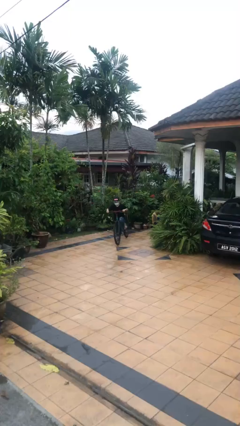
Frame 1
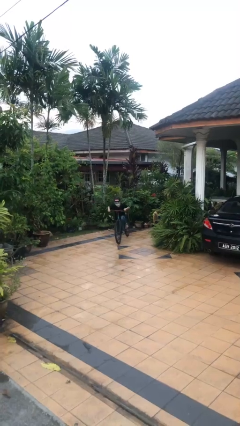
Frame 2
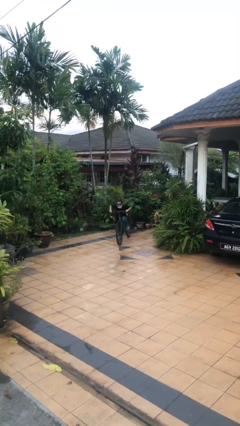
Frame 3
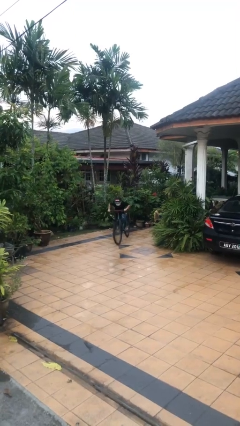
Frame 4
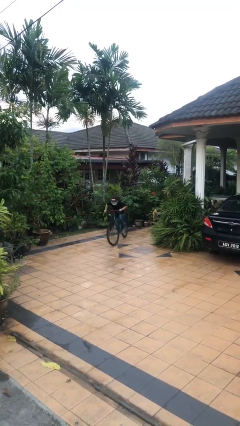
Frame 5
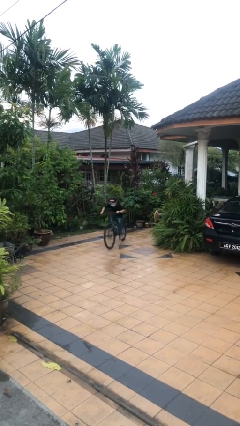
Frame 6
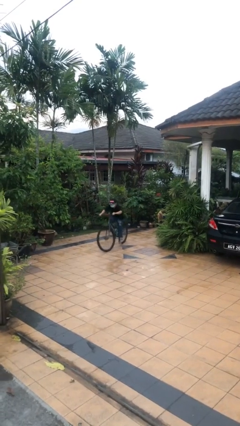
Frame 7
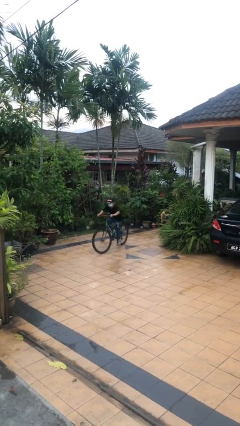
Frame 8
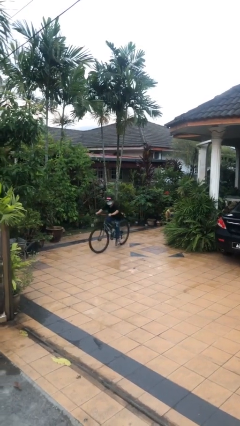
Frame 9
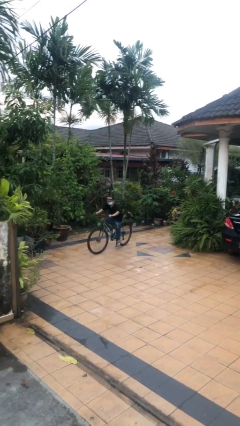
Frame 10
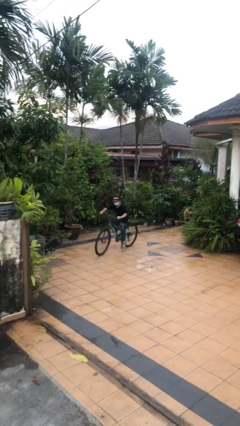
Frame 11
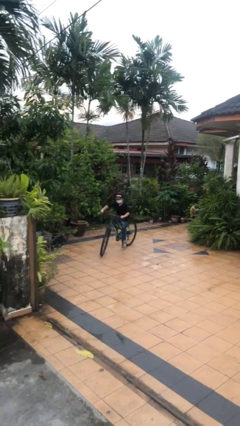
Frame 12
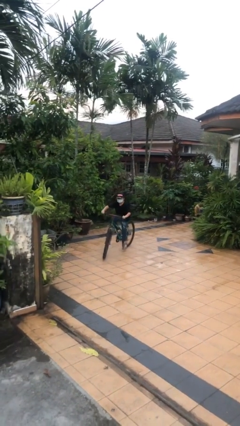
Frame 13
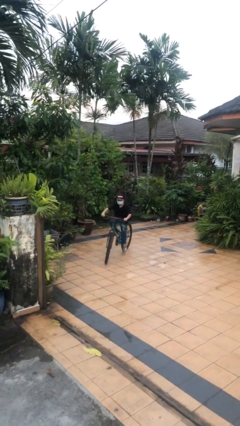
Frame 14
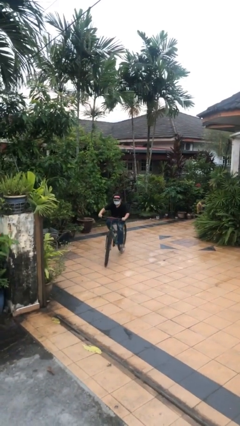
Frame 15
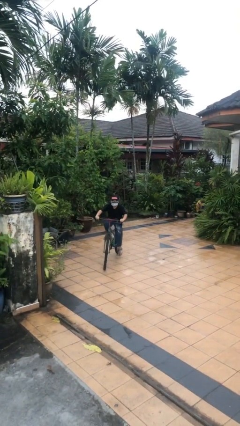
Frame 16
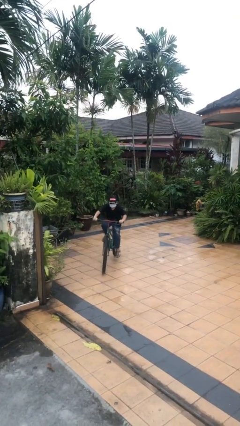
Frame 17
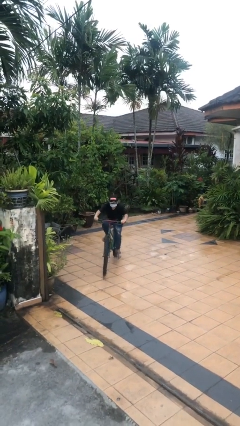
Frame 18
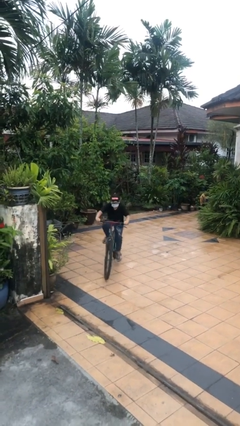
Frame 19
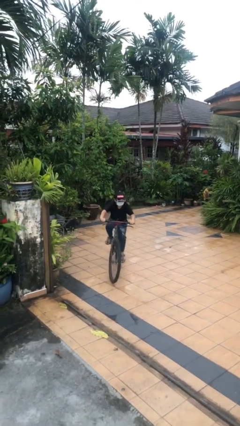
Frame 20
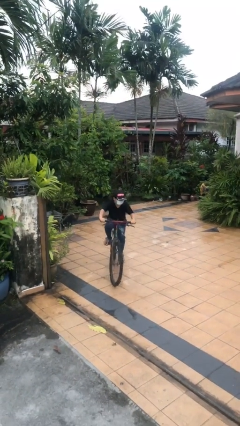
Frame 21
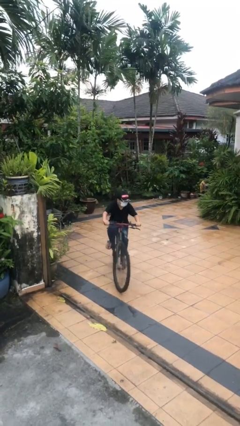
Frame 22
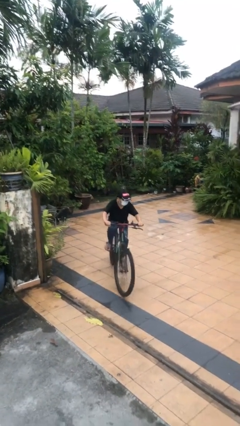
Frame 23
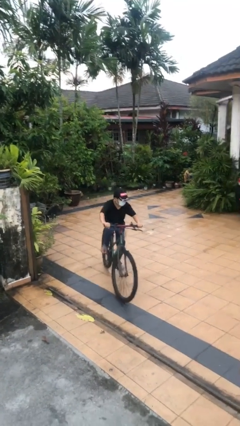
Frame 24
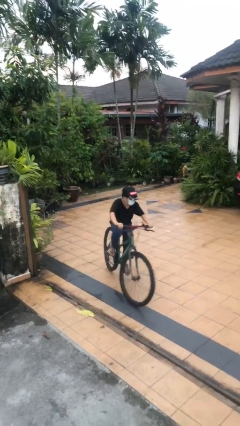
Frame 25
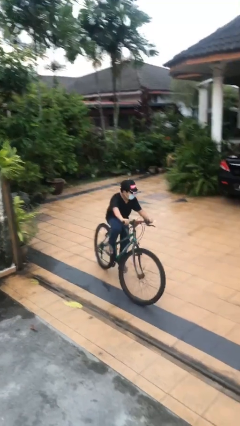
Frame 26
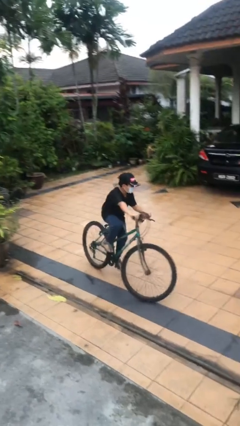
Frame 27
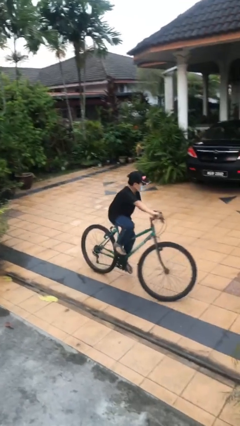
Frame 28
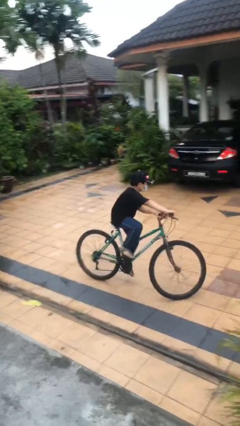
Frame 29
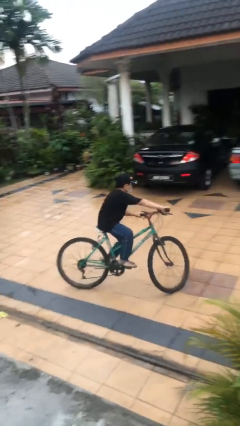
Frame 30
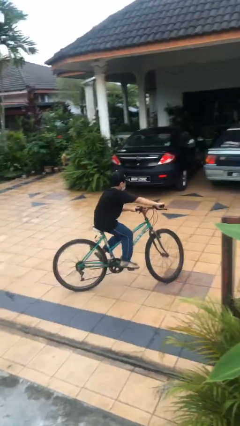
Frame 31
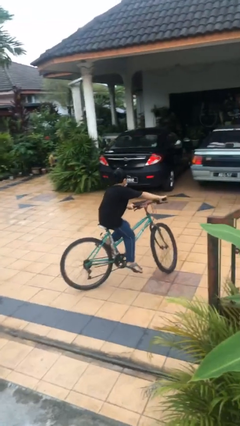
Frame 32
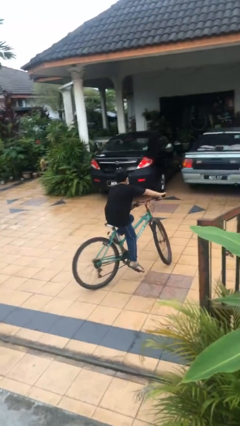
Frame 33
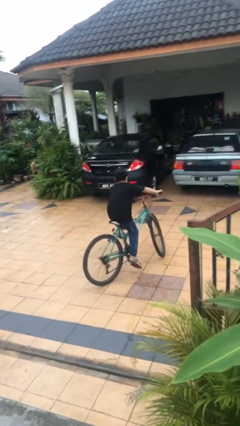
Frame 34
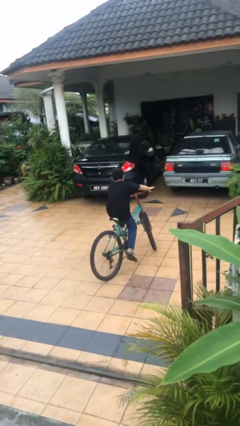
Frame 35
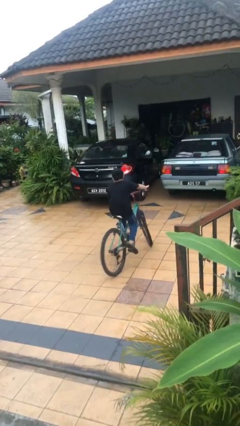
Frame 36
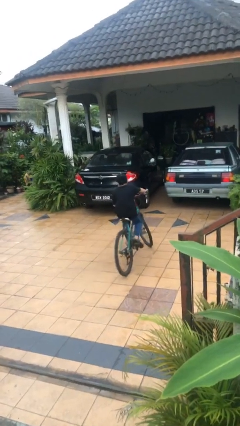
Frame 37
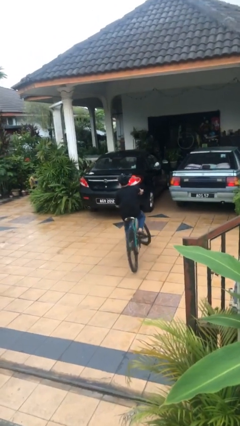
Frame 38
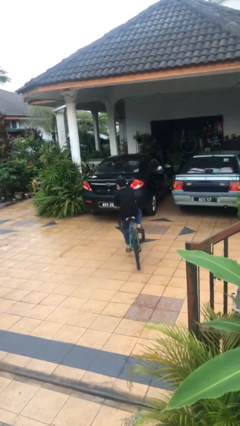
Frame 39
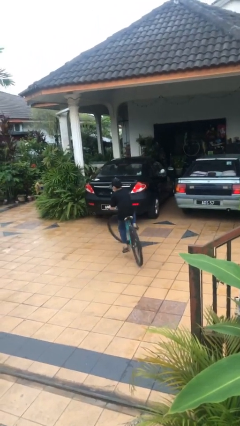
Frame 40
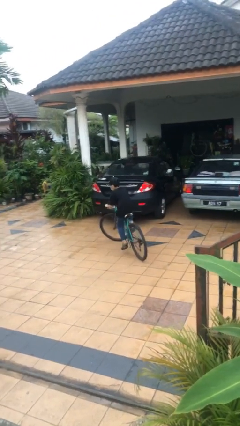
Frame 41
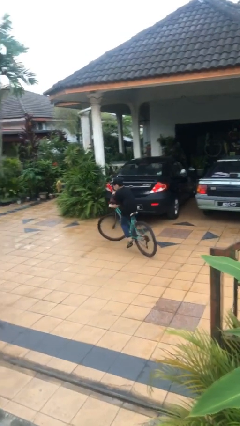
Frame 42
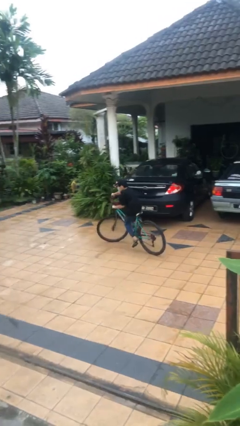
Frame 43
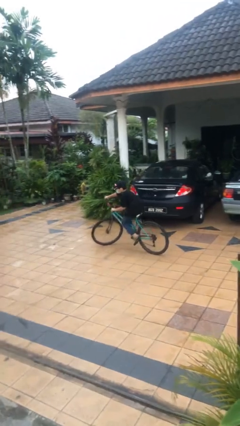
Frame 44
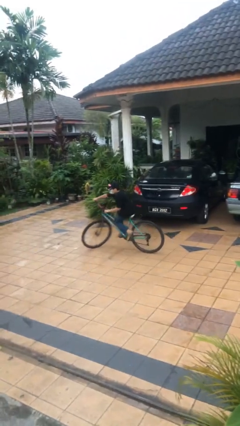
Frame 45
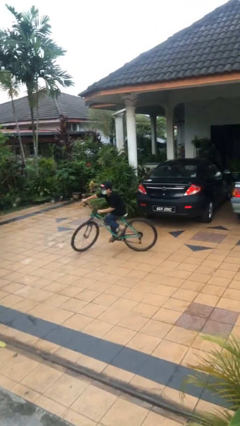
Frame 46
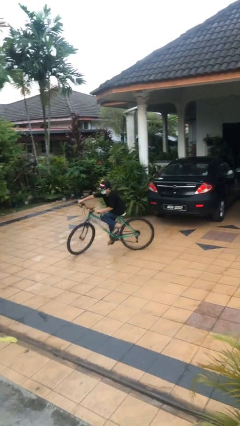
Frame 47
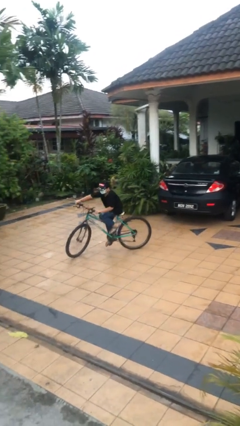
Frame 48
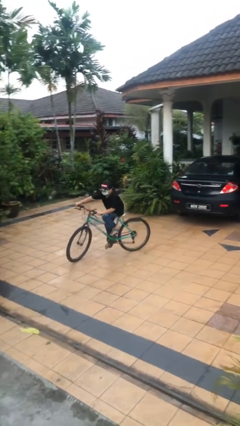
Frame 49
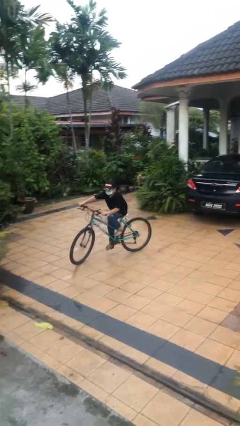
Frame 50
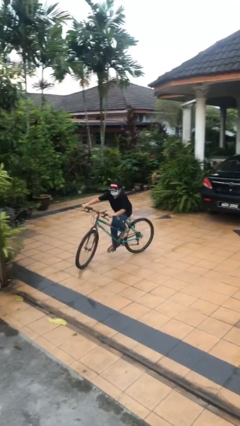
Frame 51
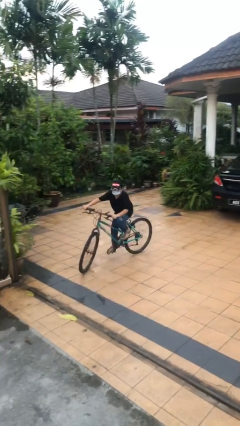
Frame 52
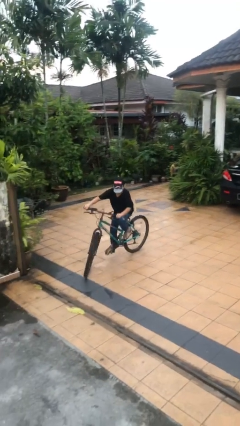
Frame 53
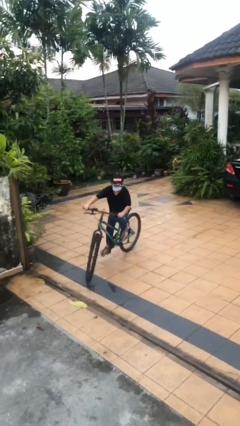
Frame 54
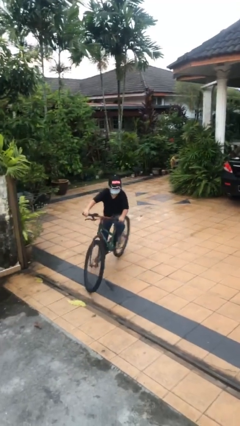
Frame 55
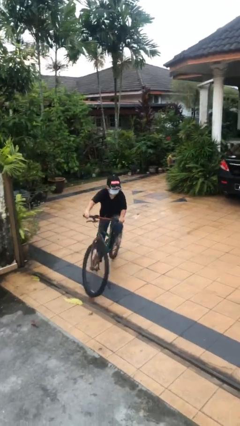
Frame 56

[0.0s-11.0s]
person rides bicycle

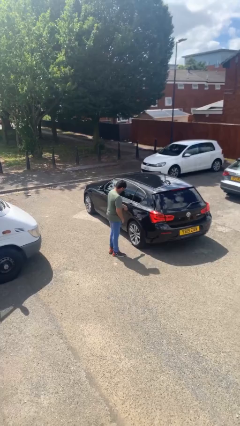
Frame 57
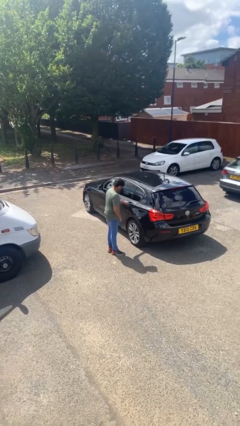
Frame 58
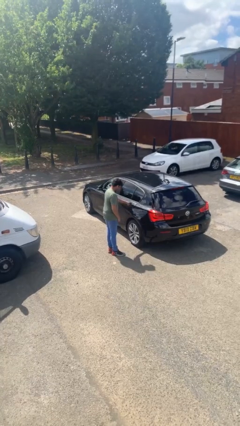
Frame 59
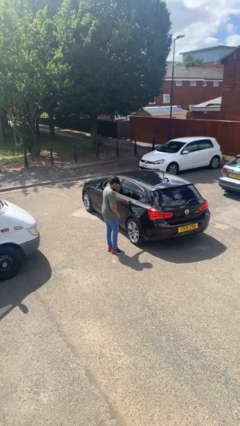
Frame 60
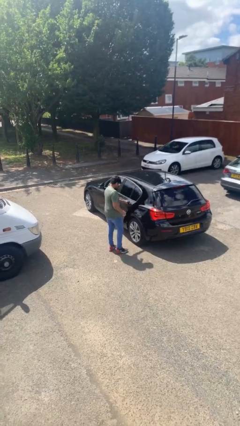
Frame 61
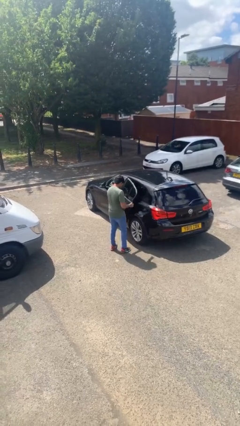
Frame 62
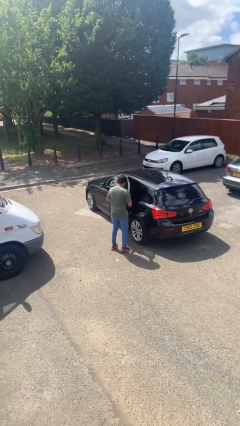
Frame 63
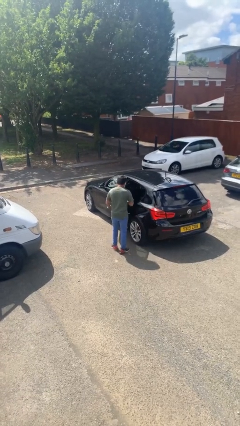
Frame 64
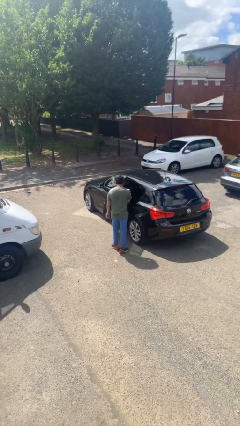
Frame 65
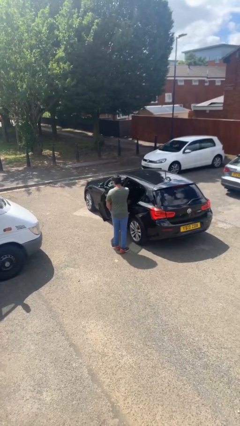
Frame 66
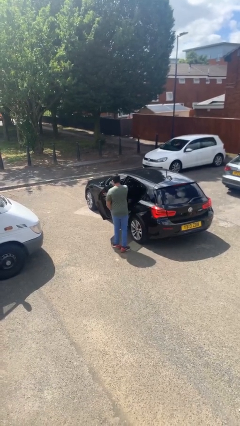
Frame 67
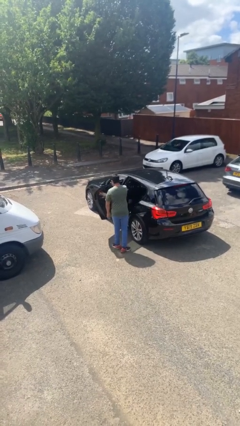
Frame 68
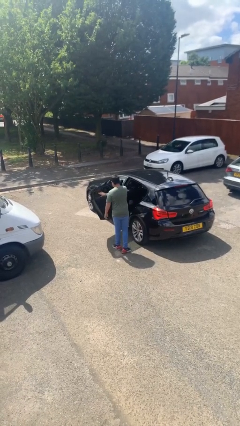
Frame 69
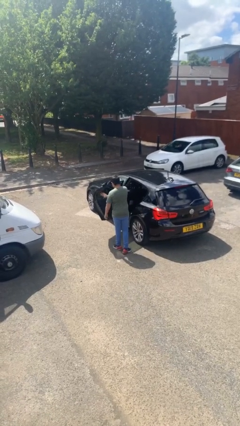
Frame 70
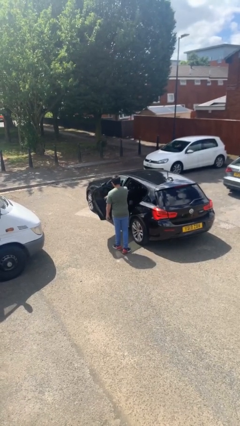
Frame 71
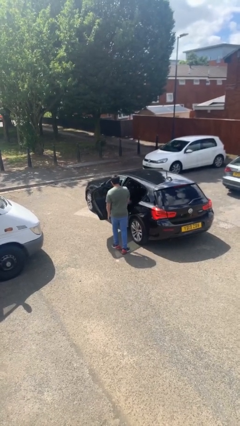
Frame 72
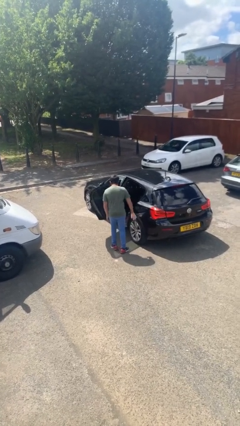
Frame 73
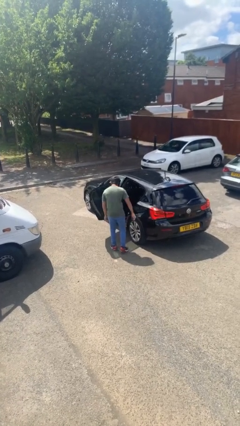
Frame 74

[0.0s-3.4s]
person opens car door

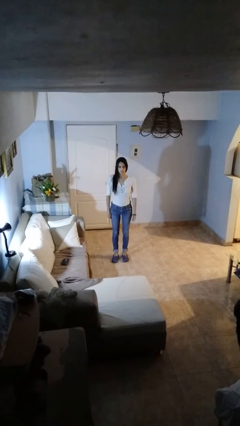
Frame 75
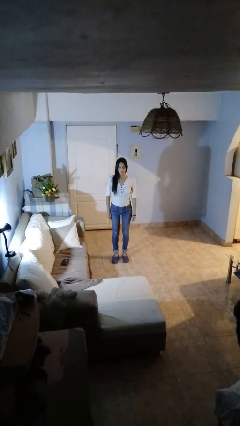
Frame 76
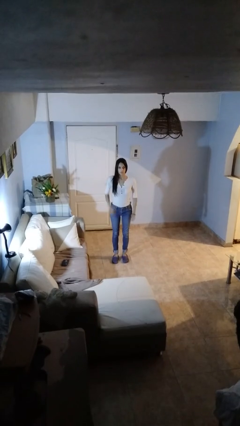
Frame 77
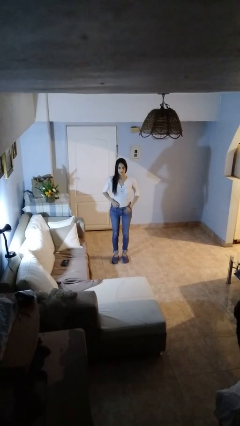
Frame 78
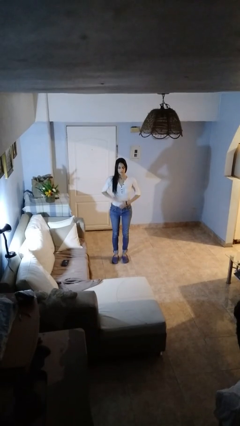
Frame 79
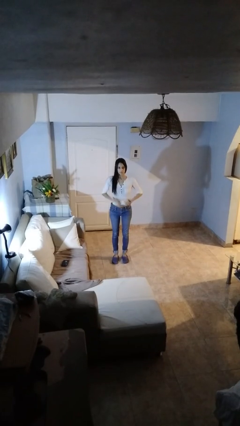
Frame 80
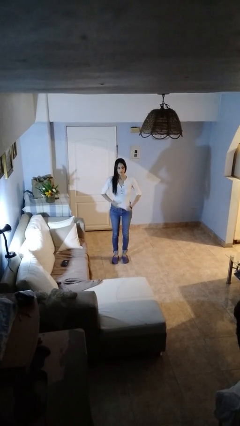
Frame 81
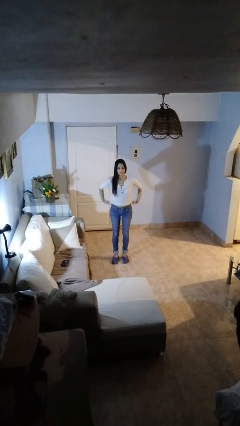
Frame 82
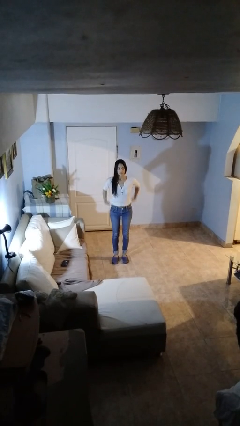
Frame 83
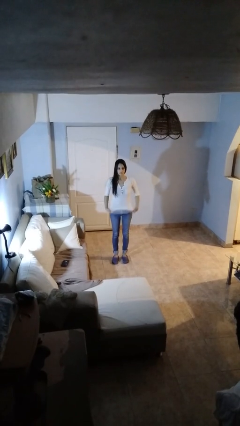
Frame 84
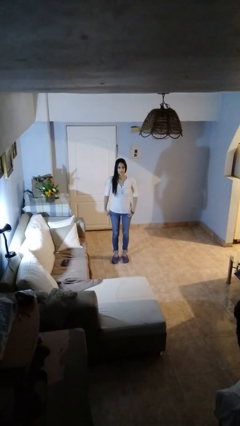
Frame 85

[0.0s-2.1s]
person untucks shirt

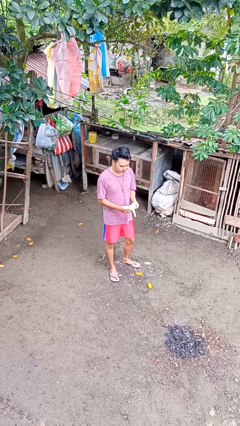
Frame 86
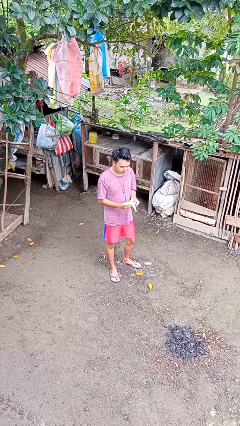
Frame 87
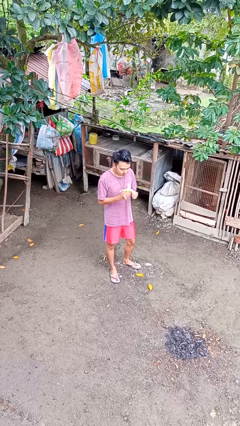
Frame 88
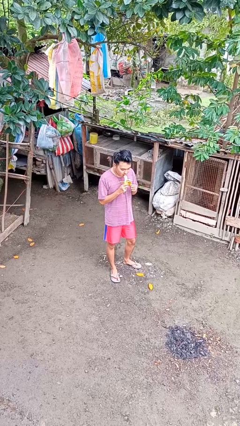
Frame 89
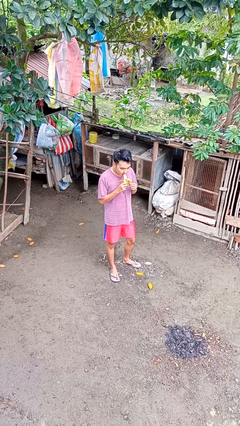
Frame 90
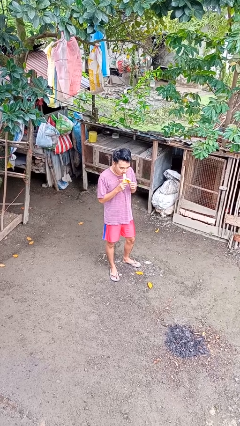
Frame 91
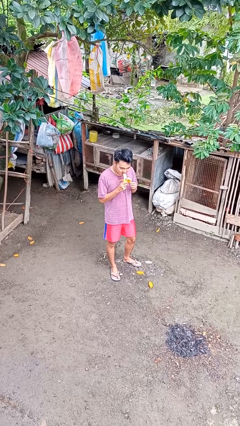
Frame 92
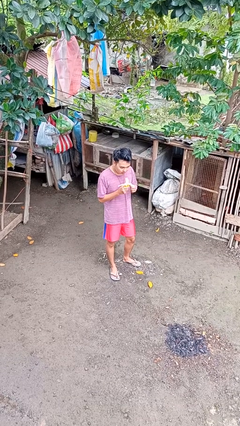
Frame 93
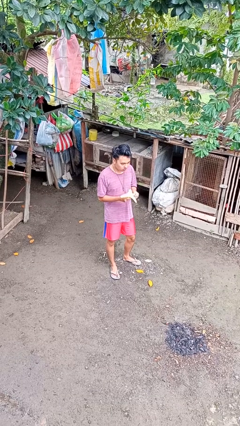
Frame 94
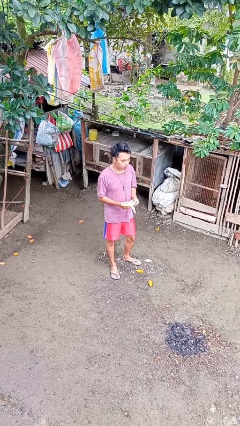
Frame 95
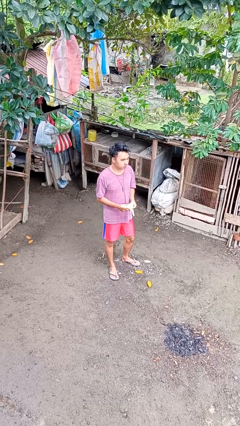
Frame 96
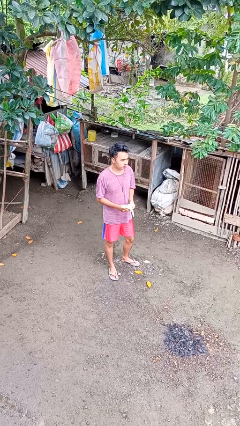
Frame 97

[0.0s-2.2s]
person eats banana
